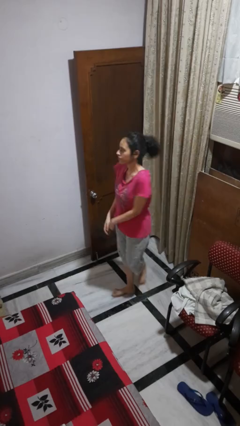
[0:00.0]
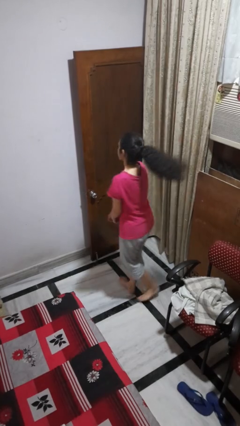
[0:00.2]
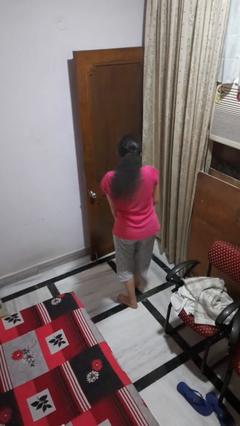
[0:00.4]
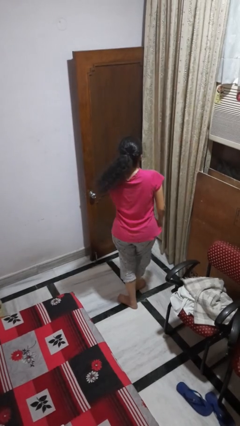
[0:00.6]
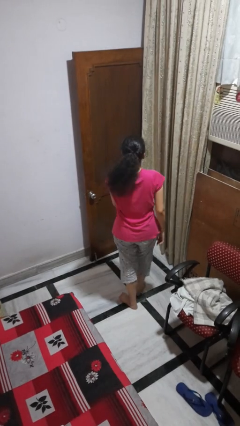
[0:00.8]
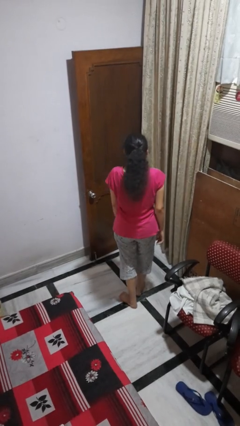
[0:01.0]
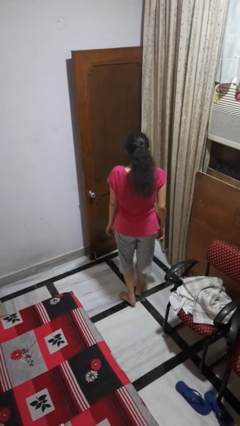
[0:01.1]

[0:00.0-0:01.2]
person twirls

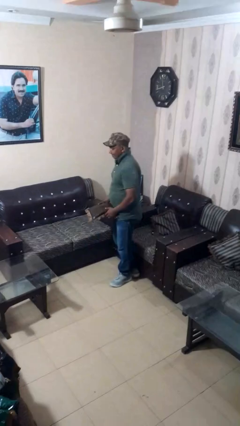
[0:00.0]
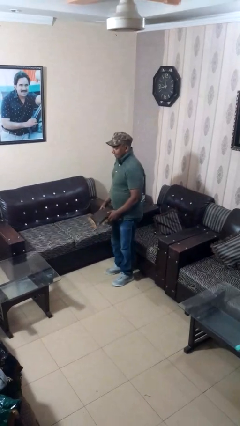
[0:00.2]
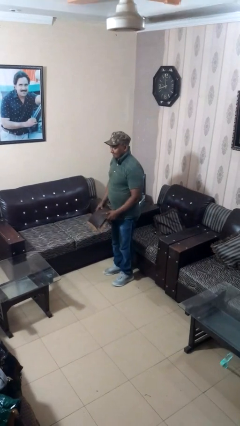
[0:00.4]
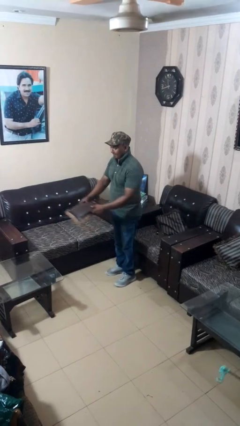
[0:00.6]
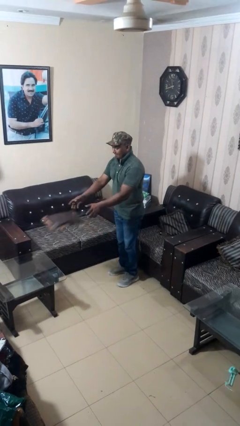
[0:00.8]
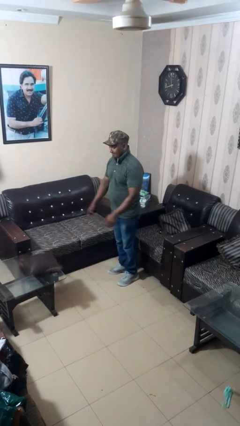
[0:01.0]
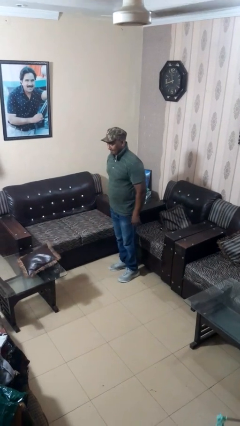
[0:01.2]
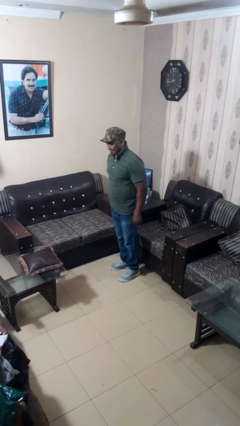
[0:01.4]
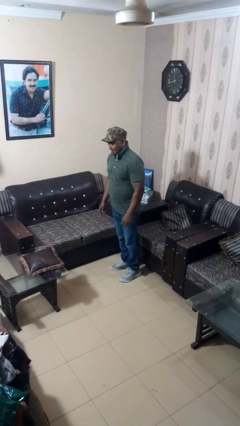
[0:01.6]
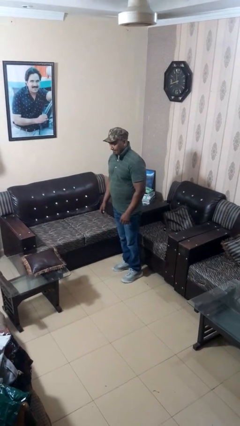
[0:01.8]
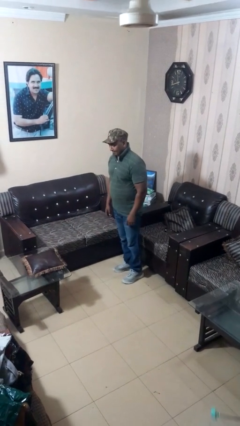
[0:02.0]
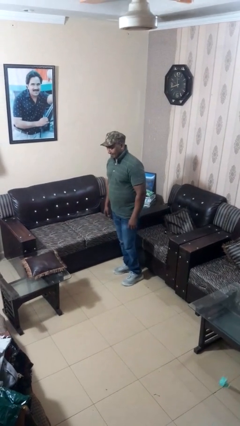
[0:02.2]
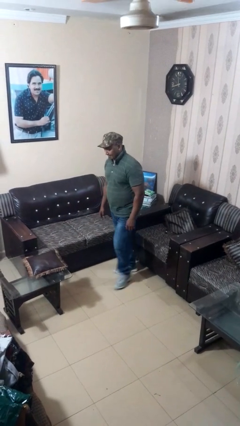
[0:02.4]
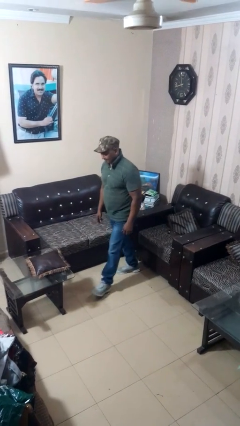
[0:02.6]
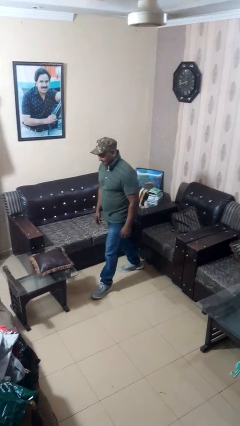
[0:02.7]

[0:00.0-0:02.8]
person throws object on table

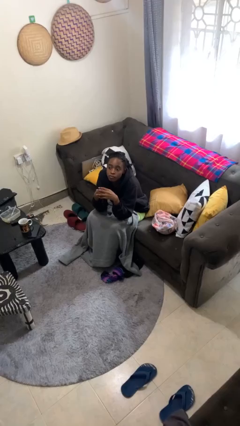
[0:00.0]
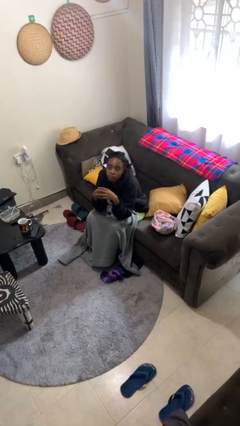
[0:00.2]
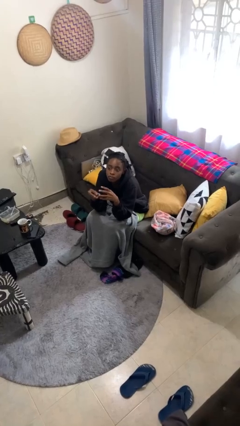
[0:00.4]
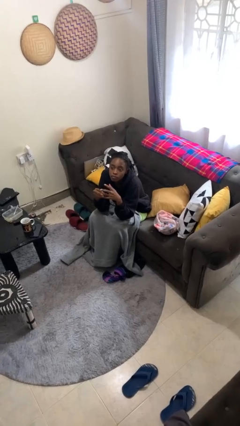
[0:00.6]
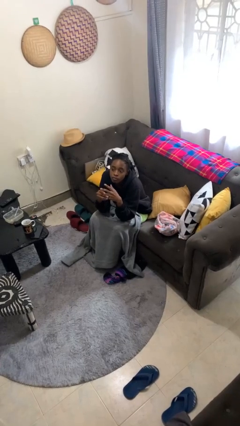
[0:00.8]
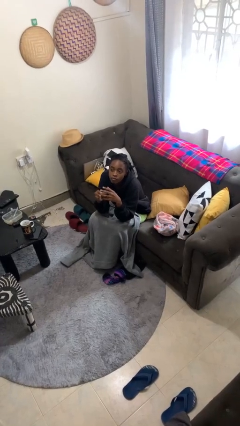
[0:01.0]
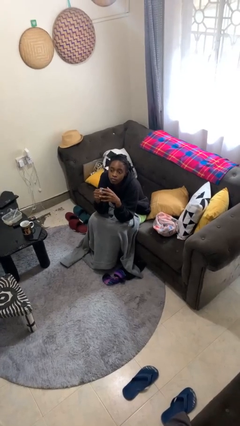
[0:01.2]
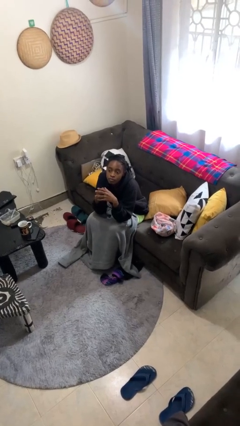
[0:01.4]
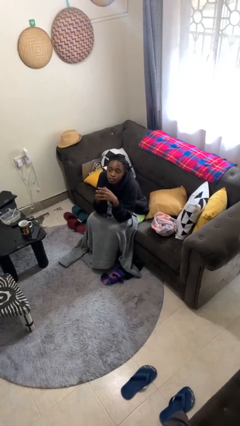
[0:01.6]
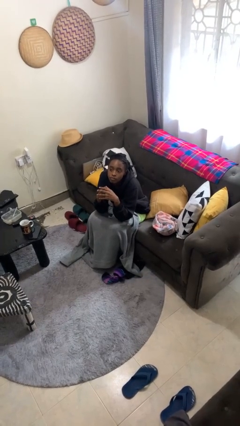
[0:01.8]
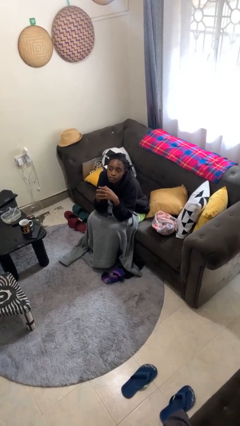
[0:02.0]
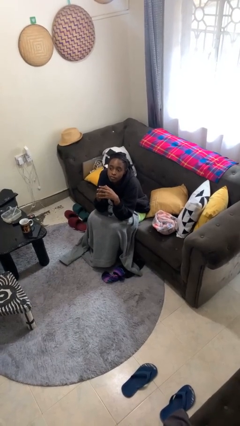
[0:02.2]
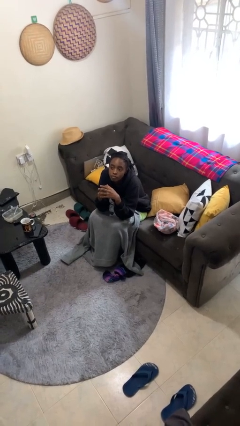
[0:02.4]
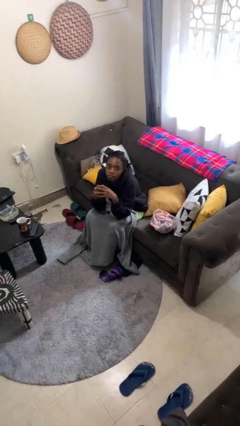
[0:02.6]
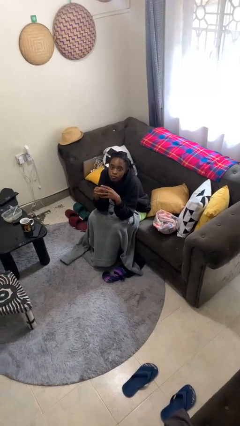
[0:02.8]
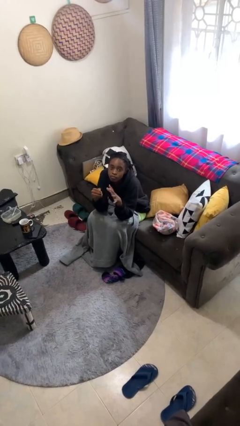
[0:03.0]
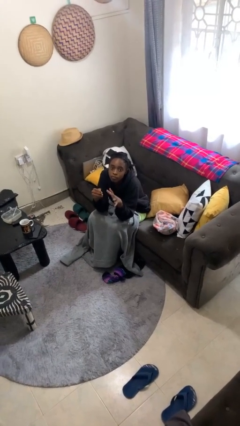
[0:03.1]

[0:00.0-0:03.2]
person puts on ring

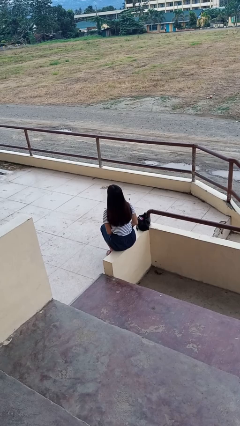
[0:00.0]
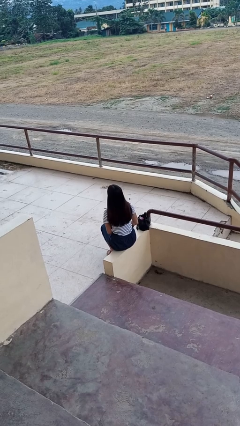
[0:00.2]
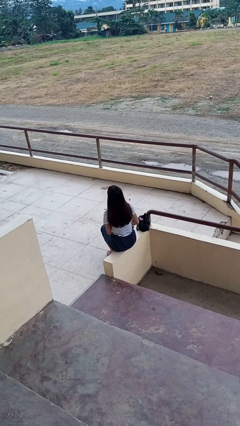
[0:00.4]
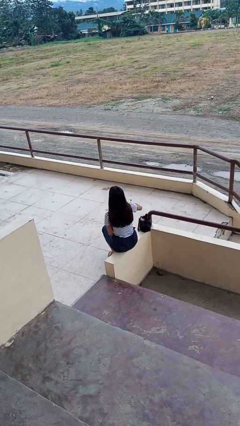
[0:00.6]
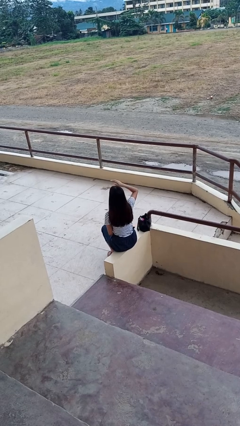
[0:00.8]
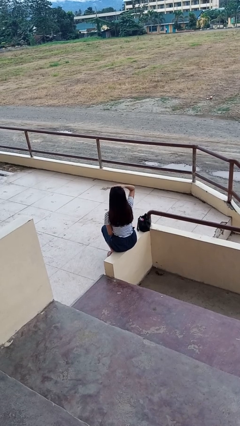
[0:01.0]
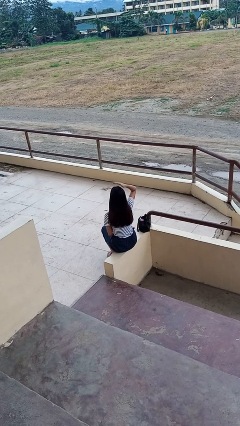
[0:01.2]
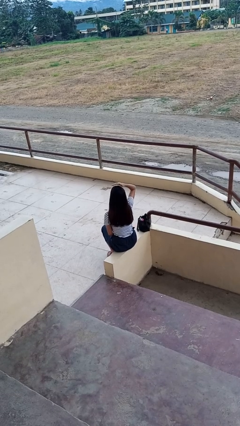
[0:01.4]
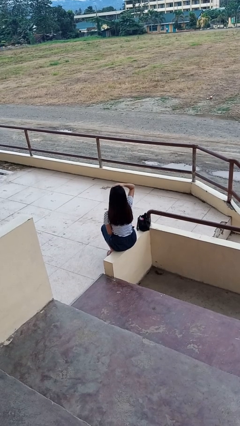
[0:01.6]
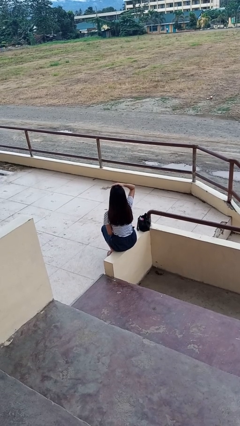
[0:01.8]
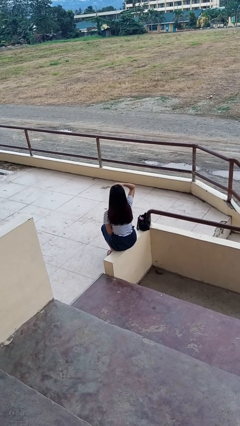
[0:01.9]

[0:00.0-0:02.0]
person pats head

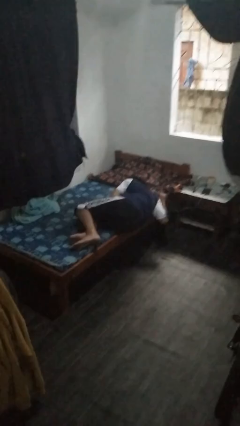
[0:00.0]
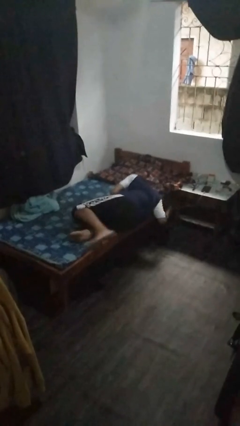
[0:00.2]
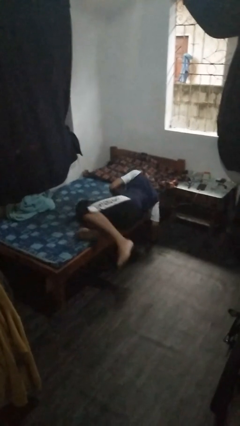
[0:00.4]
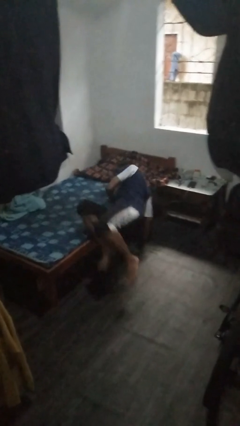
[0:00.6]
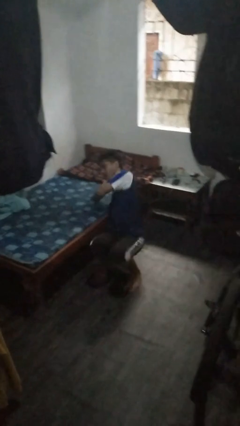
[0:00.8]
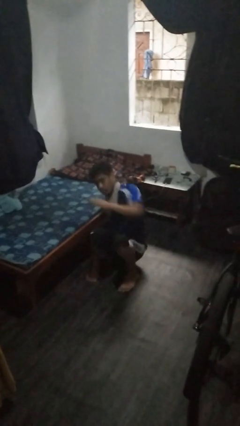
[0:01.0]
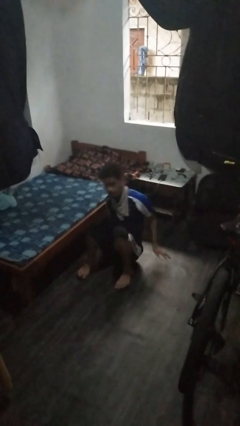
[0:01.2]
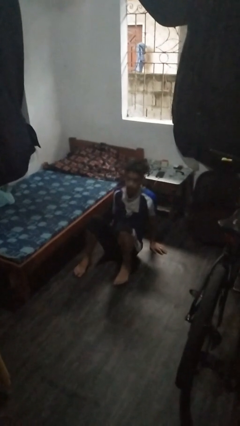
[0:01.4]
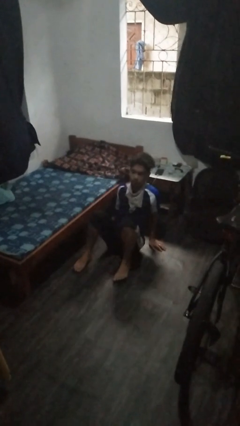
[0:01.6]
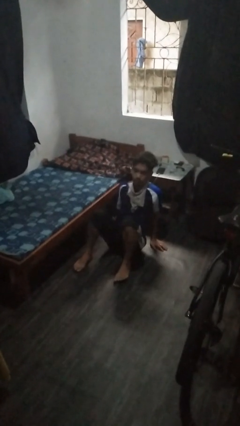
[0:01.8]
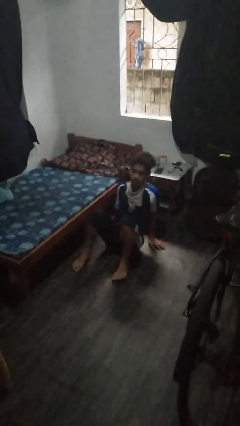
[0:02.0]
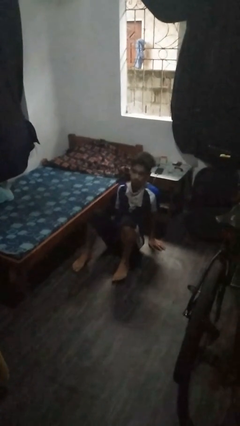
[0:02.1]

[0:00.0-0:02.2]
person falls from bed

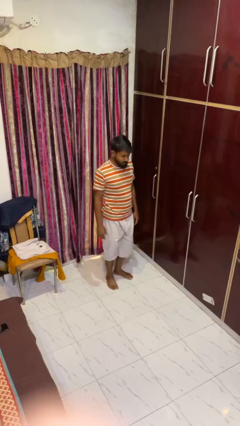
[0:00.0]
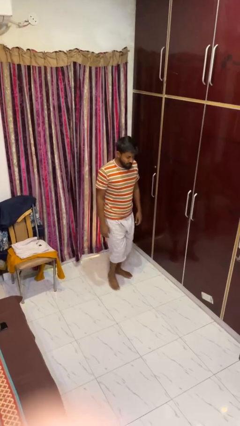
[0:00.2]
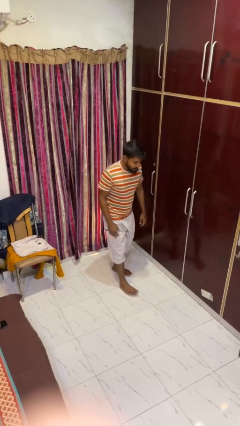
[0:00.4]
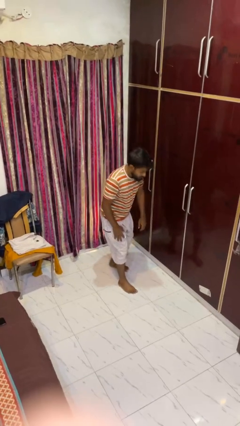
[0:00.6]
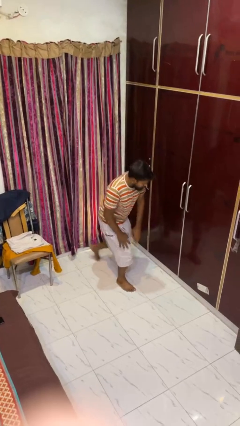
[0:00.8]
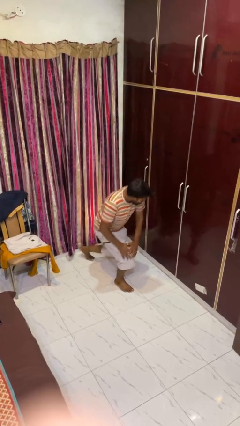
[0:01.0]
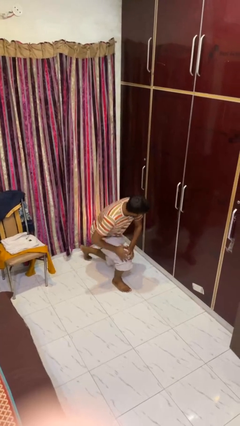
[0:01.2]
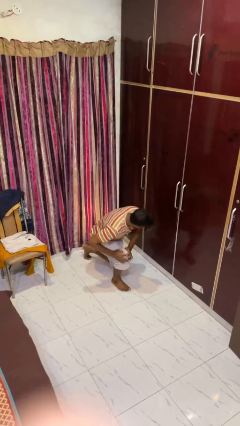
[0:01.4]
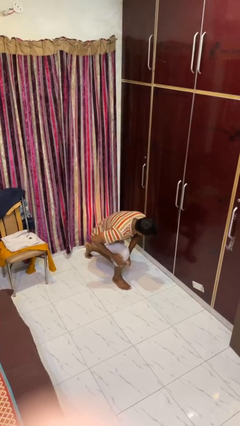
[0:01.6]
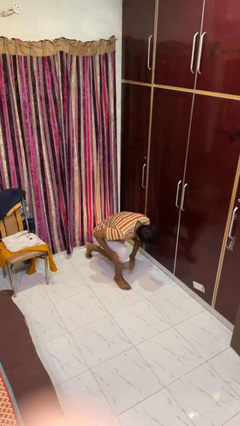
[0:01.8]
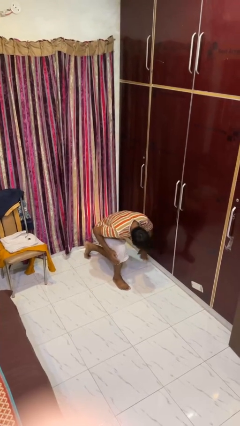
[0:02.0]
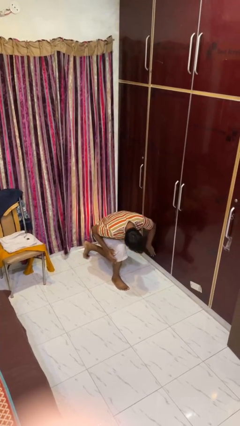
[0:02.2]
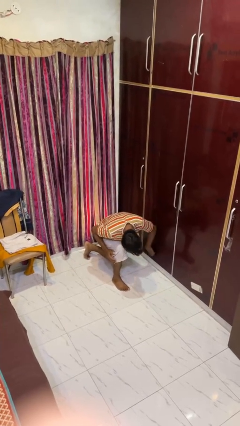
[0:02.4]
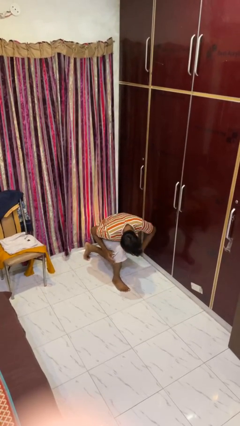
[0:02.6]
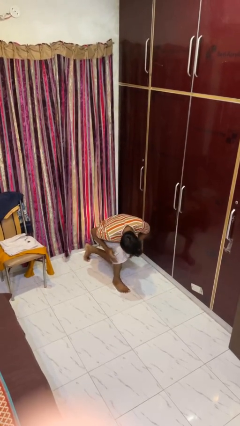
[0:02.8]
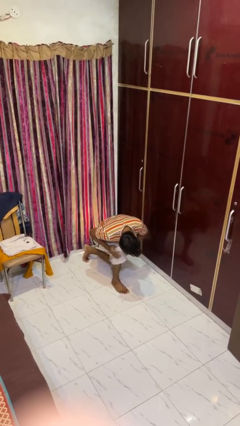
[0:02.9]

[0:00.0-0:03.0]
person kneels

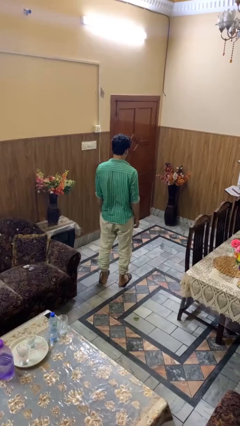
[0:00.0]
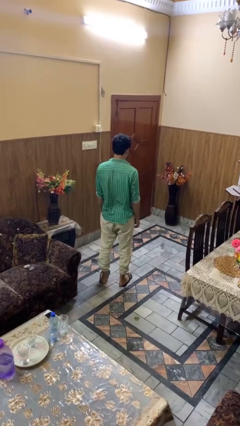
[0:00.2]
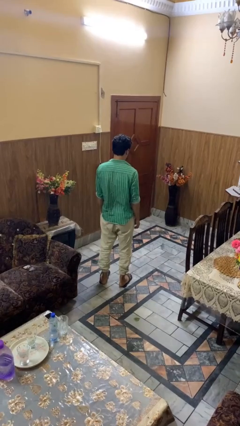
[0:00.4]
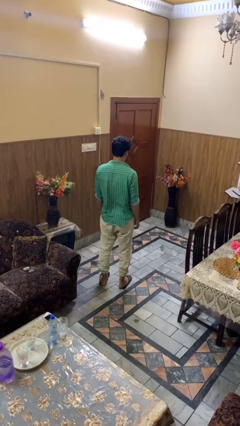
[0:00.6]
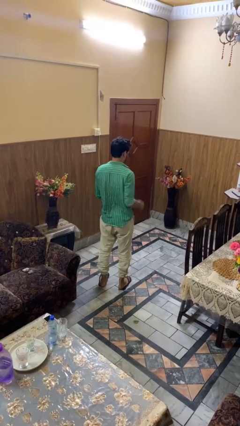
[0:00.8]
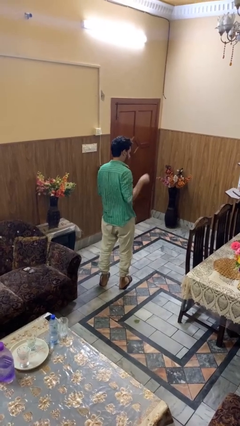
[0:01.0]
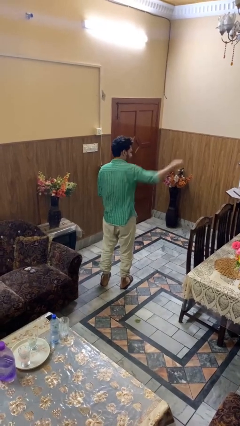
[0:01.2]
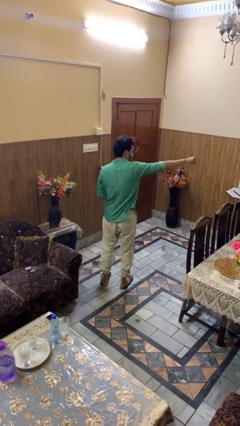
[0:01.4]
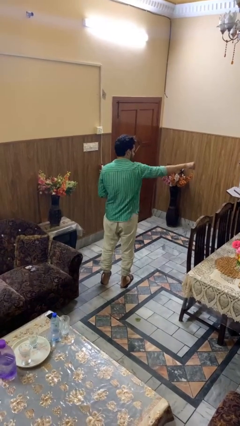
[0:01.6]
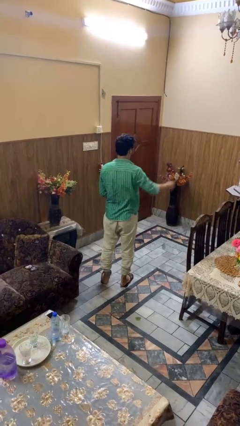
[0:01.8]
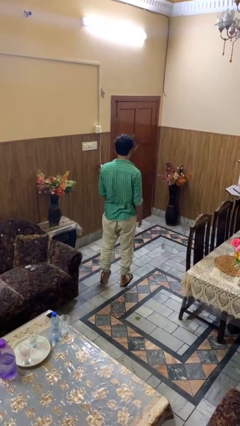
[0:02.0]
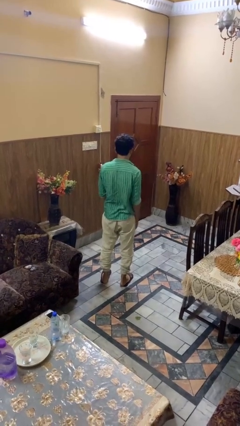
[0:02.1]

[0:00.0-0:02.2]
person punches

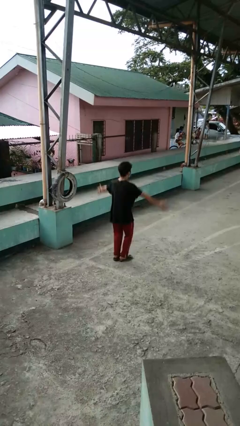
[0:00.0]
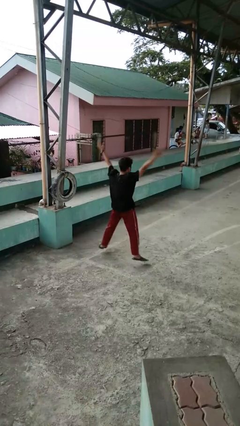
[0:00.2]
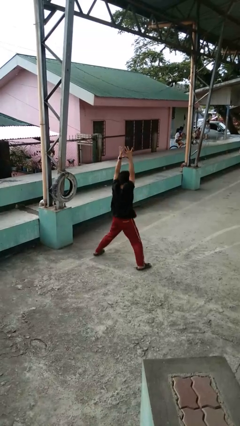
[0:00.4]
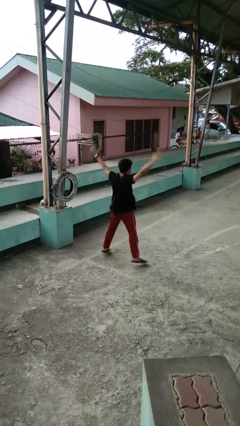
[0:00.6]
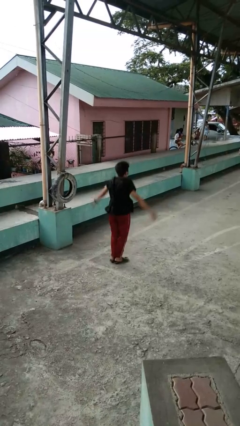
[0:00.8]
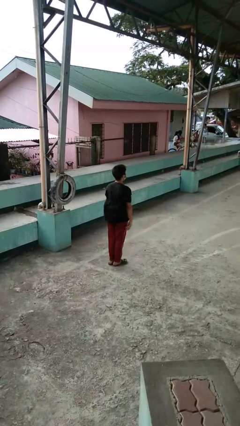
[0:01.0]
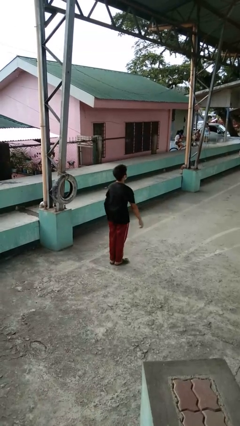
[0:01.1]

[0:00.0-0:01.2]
person exercises with jumping jacks
